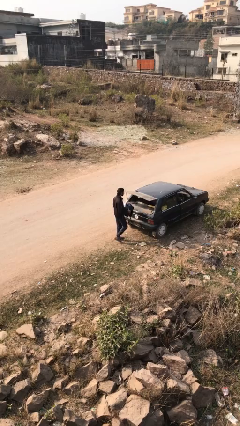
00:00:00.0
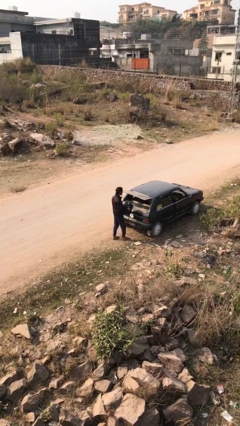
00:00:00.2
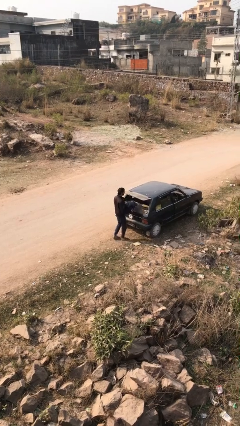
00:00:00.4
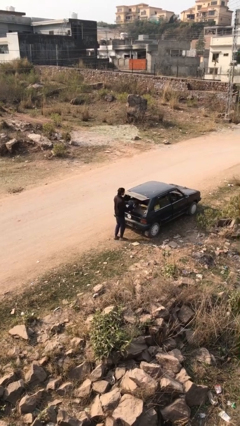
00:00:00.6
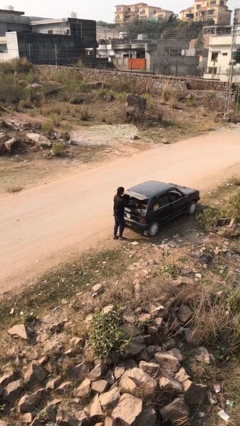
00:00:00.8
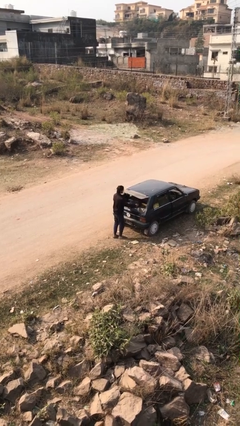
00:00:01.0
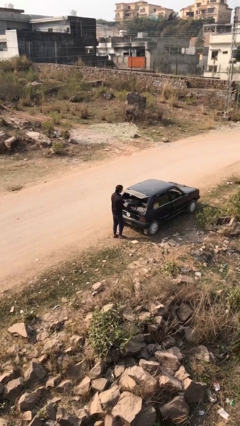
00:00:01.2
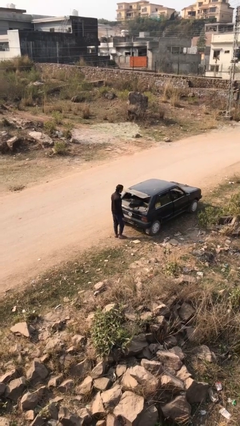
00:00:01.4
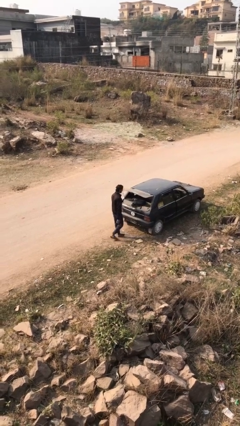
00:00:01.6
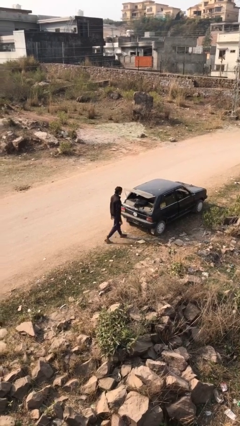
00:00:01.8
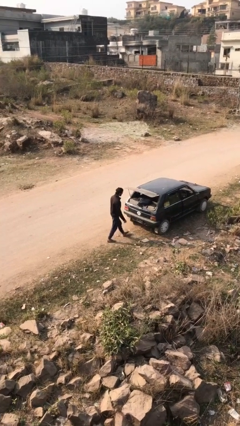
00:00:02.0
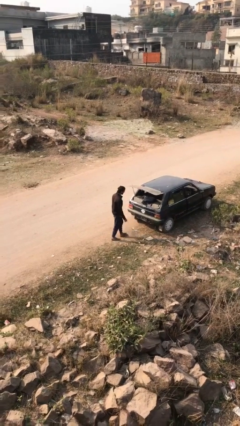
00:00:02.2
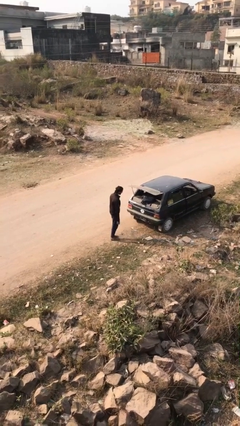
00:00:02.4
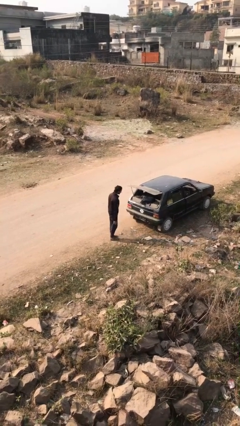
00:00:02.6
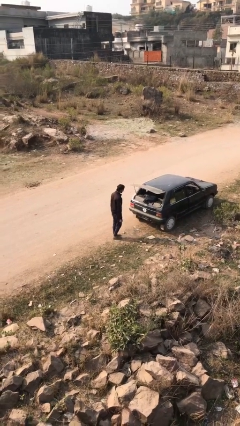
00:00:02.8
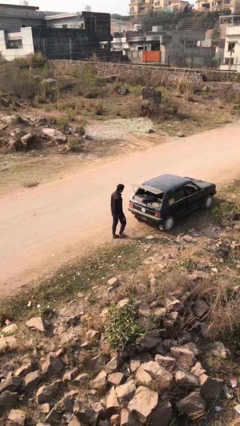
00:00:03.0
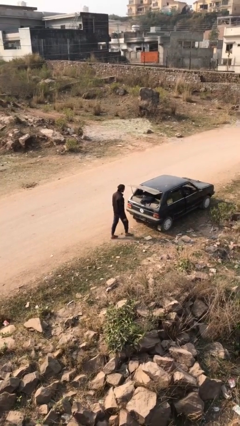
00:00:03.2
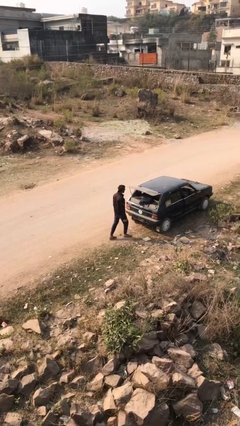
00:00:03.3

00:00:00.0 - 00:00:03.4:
person loads car

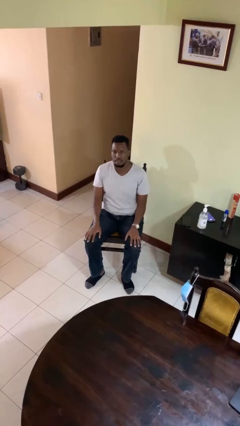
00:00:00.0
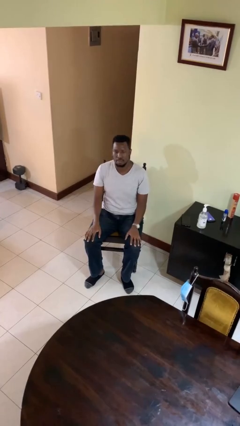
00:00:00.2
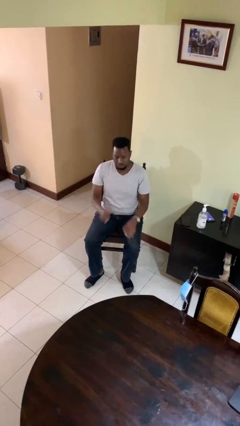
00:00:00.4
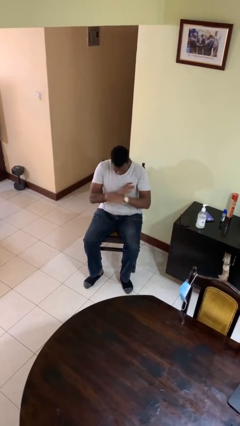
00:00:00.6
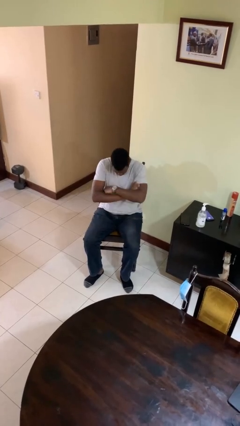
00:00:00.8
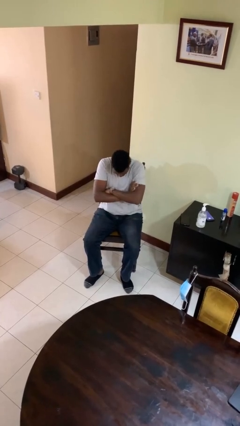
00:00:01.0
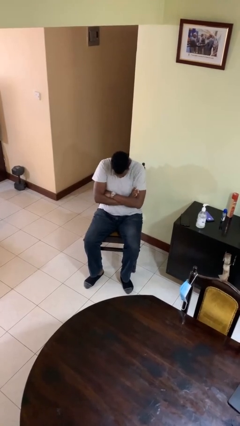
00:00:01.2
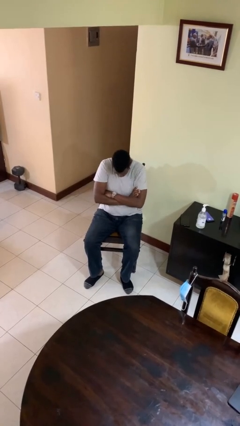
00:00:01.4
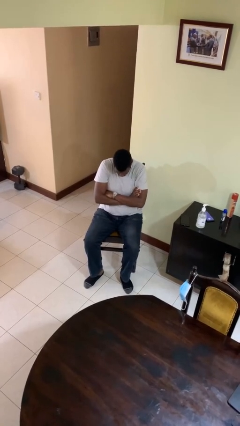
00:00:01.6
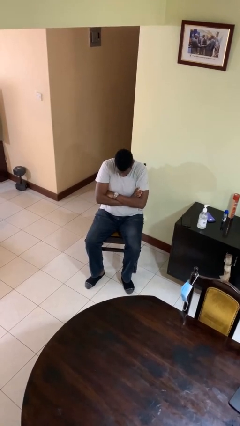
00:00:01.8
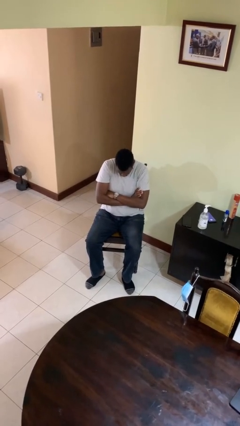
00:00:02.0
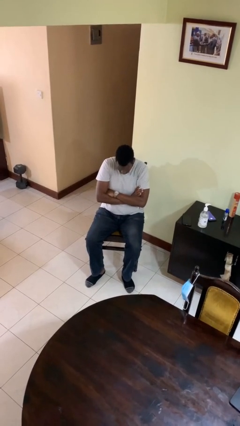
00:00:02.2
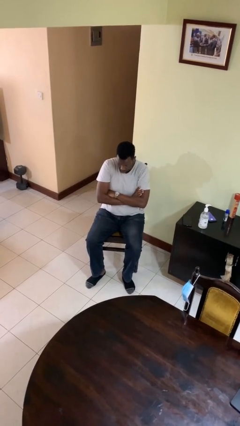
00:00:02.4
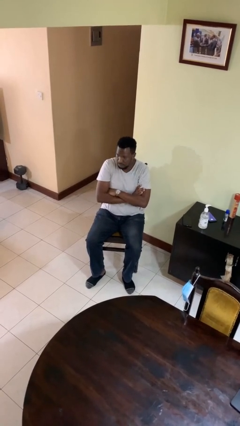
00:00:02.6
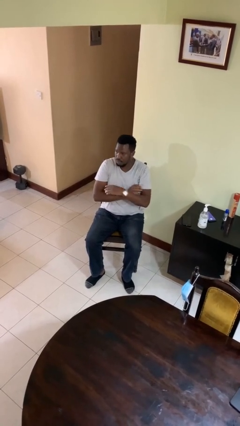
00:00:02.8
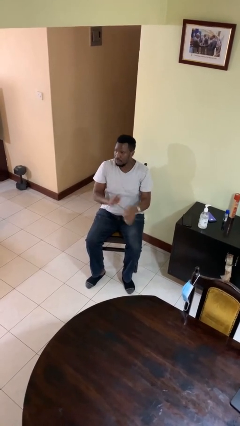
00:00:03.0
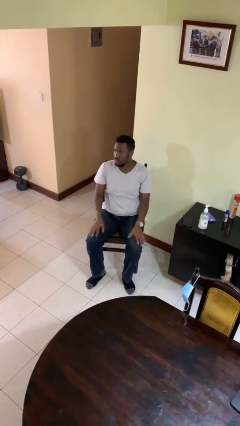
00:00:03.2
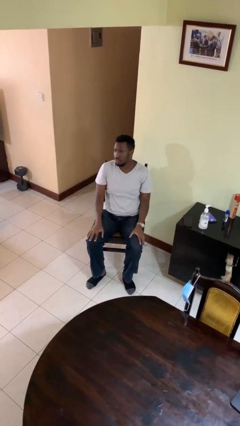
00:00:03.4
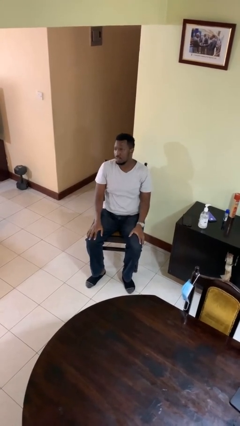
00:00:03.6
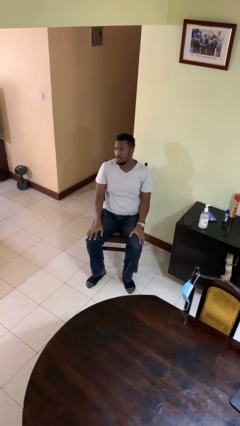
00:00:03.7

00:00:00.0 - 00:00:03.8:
person crosses arms

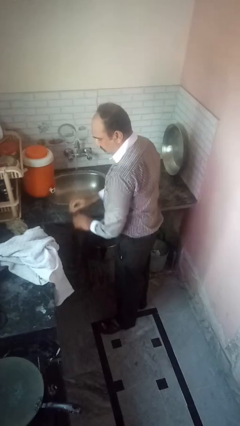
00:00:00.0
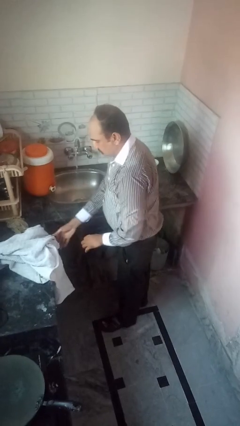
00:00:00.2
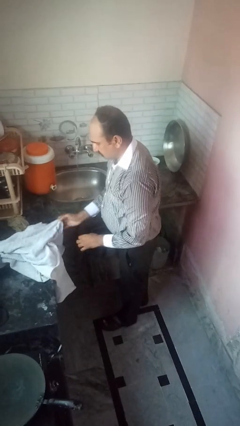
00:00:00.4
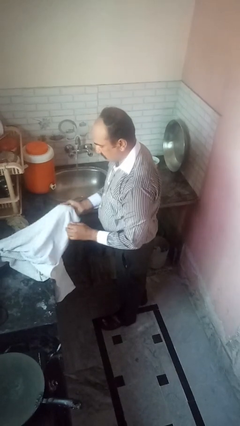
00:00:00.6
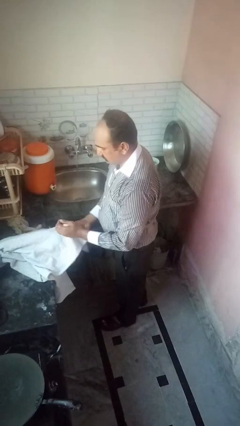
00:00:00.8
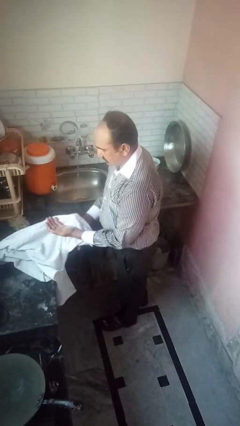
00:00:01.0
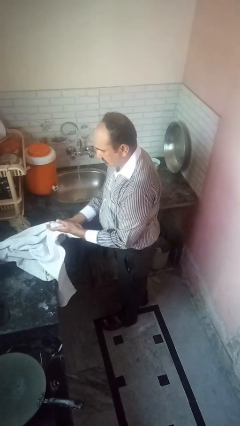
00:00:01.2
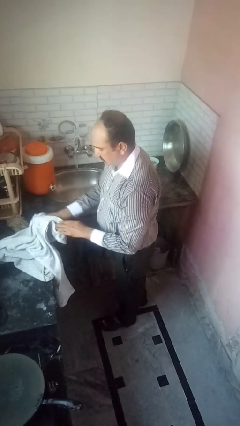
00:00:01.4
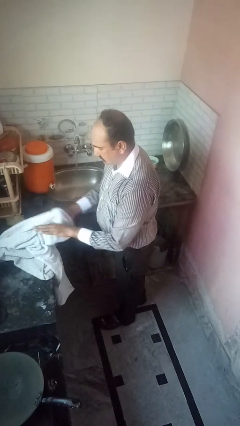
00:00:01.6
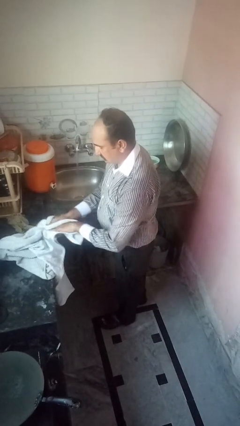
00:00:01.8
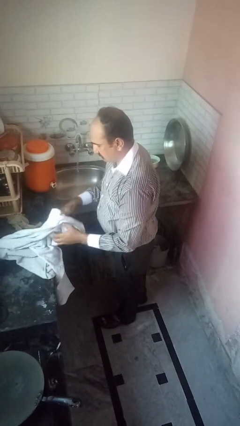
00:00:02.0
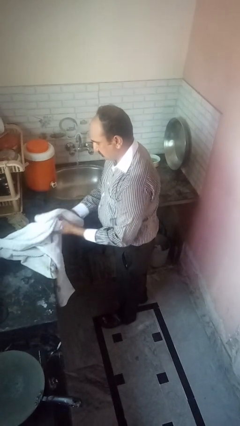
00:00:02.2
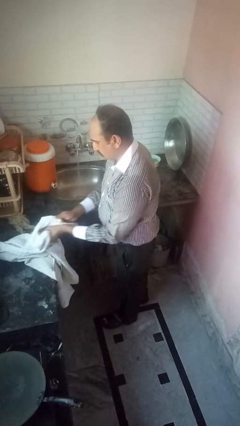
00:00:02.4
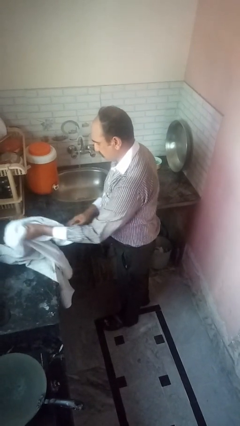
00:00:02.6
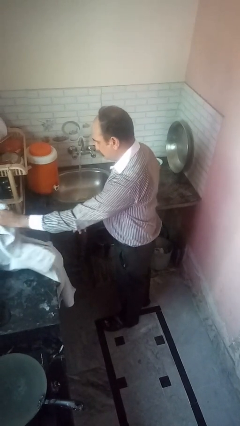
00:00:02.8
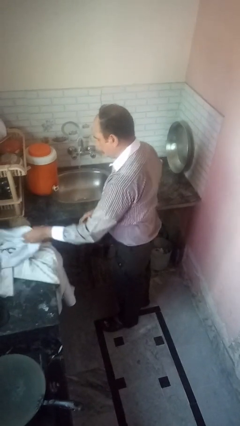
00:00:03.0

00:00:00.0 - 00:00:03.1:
person dries hands with towel

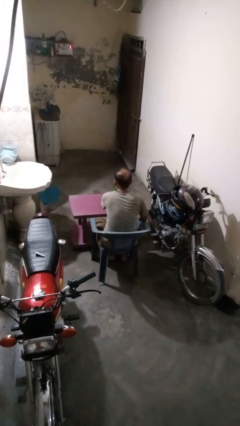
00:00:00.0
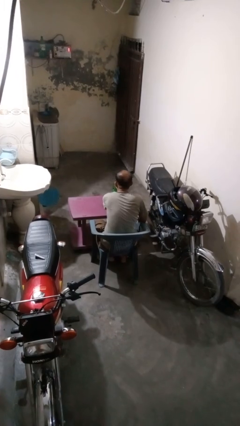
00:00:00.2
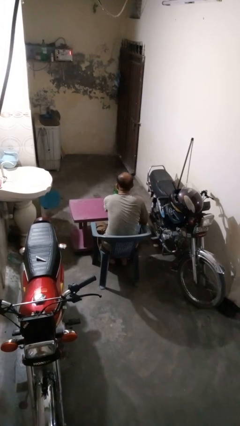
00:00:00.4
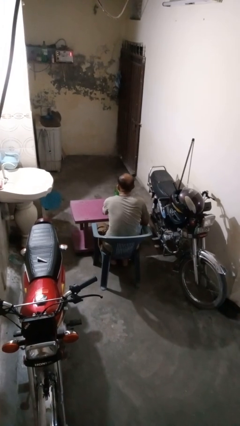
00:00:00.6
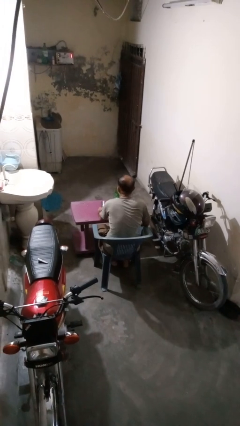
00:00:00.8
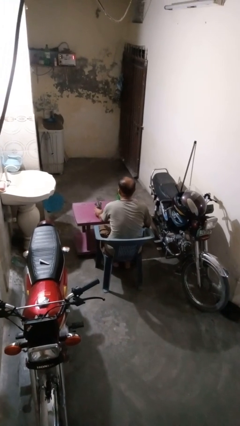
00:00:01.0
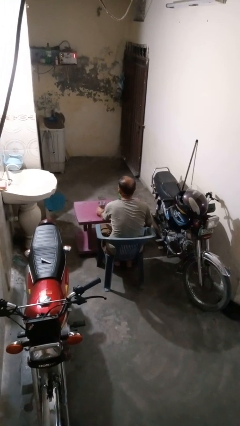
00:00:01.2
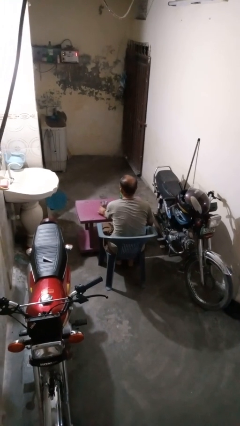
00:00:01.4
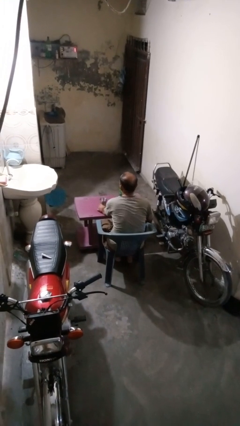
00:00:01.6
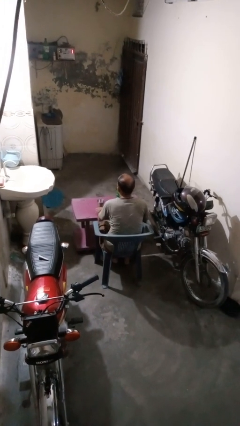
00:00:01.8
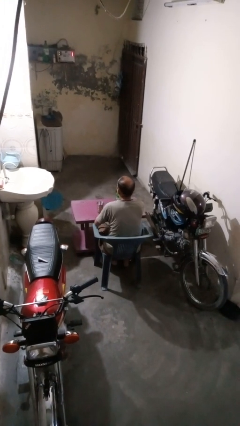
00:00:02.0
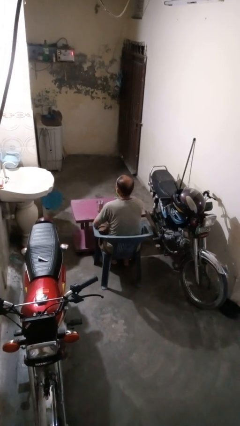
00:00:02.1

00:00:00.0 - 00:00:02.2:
person sets upright glass

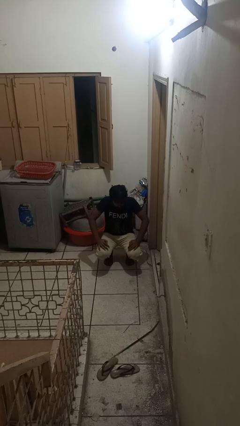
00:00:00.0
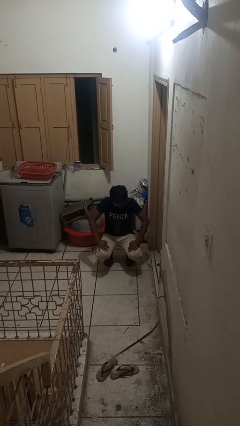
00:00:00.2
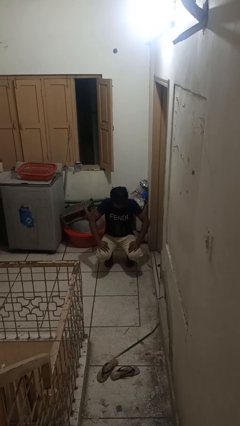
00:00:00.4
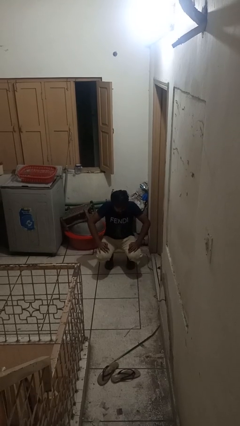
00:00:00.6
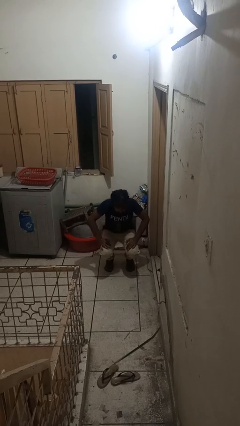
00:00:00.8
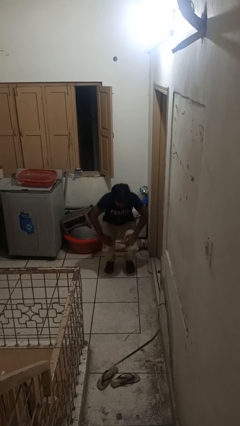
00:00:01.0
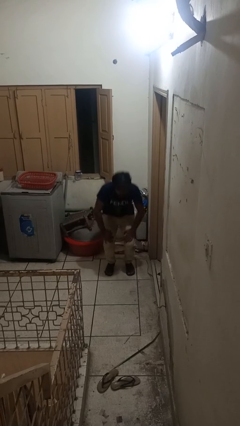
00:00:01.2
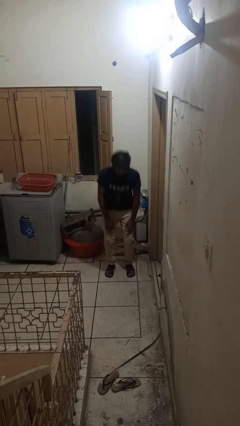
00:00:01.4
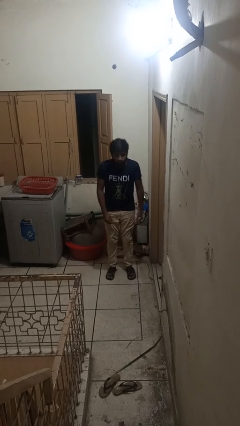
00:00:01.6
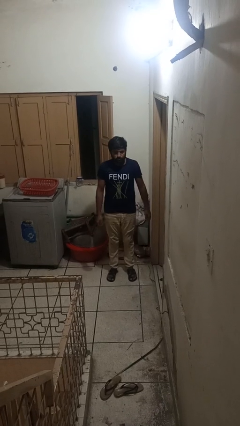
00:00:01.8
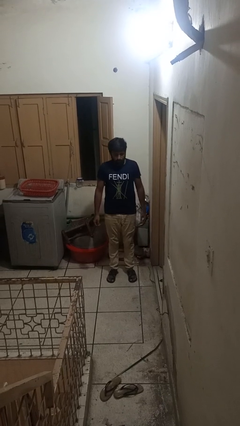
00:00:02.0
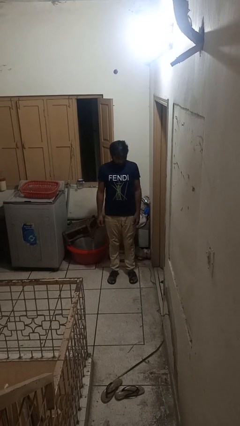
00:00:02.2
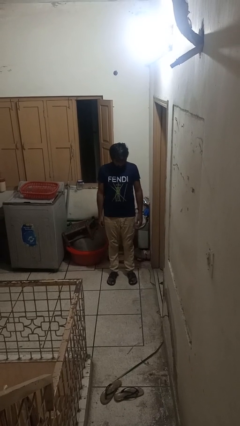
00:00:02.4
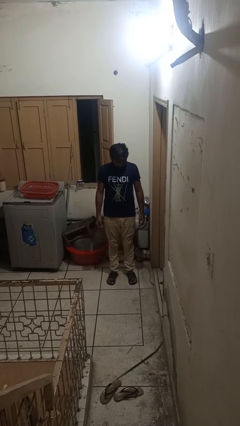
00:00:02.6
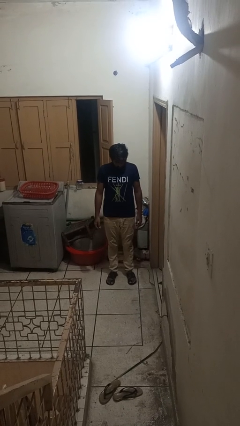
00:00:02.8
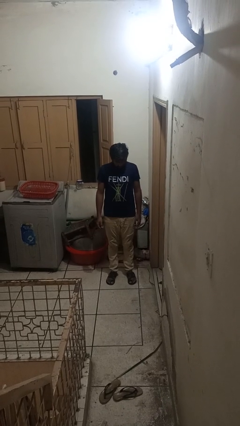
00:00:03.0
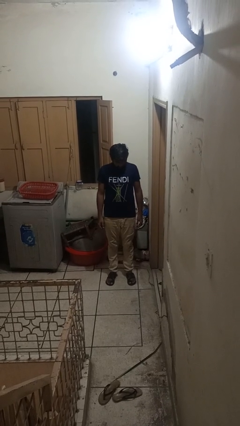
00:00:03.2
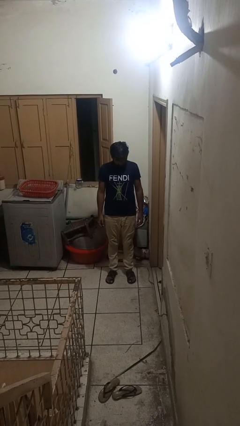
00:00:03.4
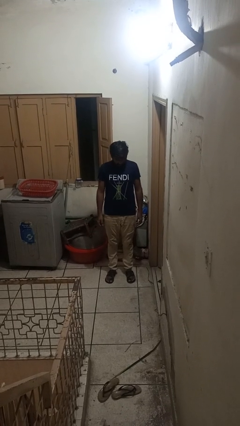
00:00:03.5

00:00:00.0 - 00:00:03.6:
person stands up

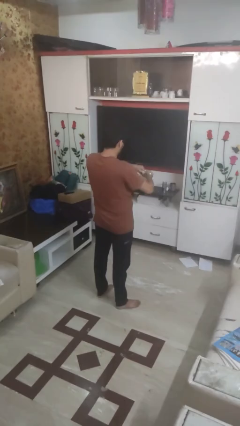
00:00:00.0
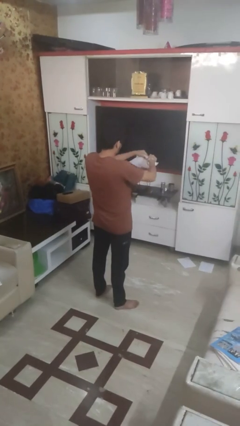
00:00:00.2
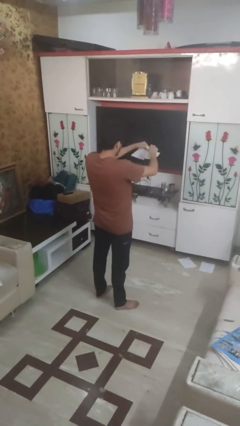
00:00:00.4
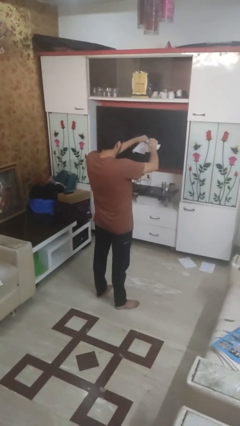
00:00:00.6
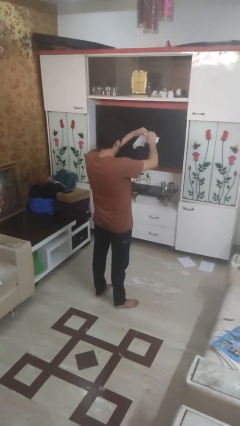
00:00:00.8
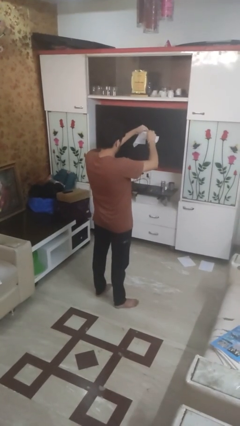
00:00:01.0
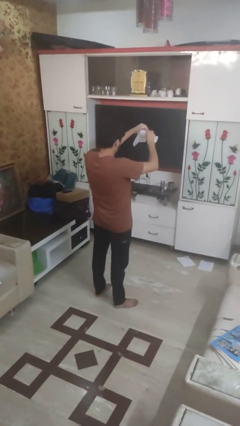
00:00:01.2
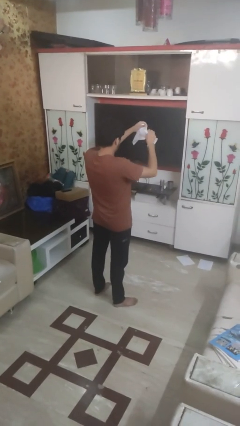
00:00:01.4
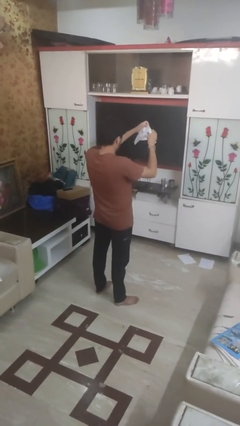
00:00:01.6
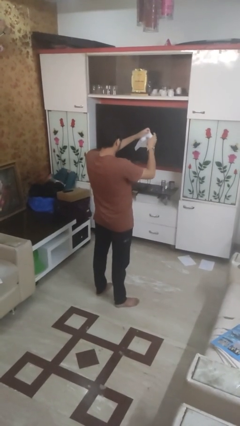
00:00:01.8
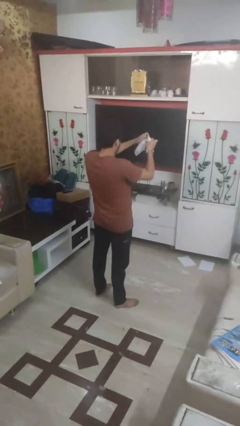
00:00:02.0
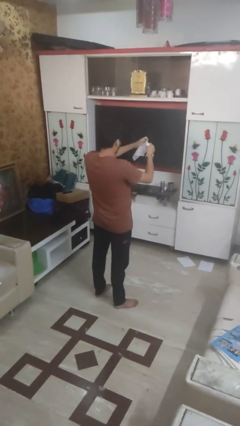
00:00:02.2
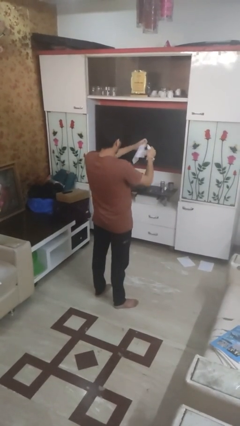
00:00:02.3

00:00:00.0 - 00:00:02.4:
person tears paper
